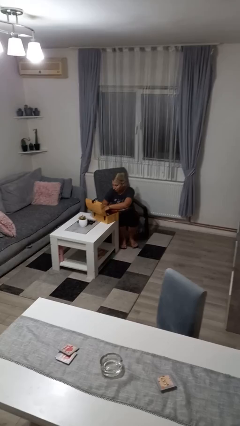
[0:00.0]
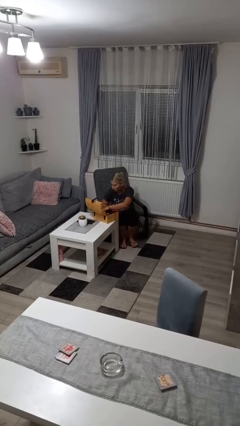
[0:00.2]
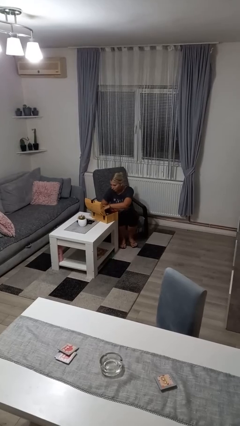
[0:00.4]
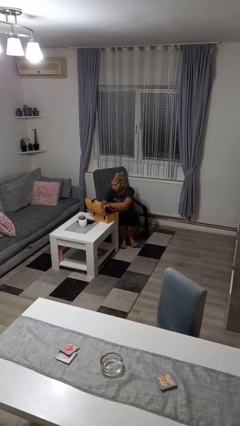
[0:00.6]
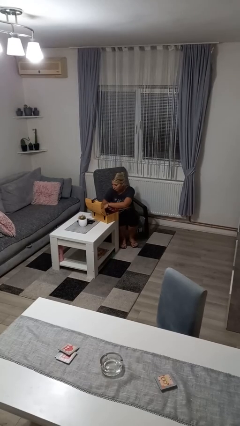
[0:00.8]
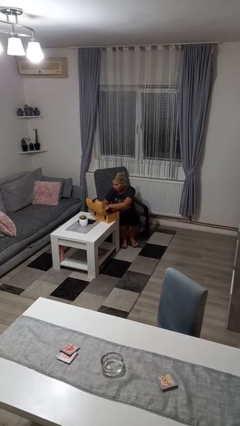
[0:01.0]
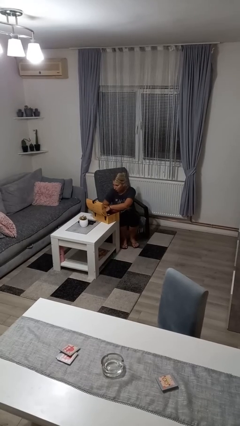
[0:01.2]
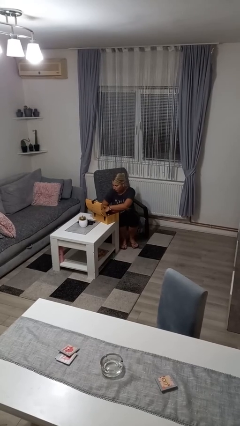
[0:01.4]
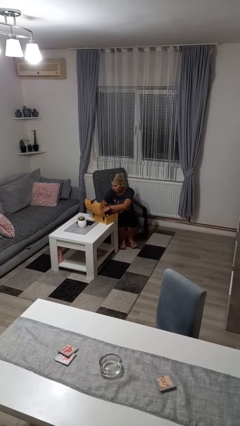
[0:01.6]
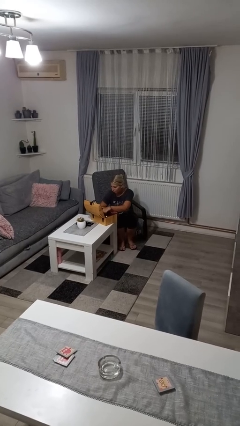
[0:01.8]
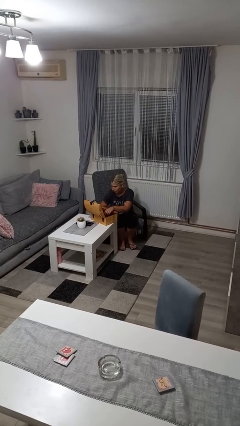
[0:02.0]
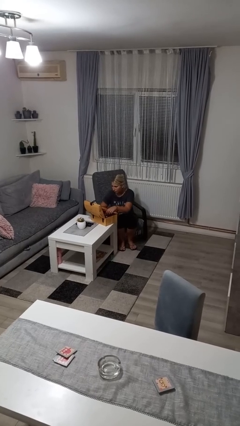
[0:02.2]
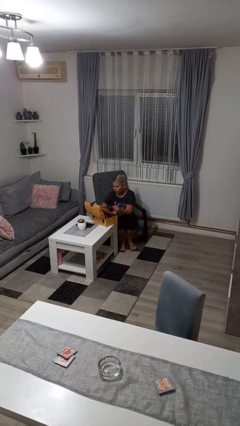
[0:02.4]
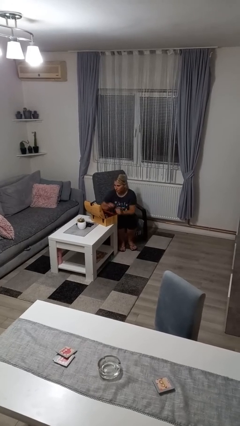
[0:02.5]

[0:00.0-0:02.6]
person searches jewelry box

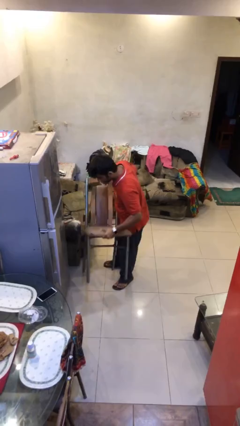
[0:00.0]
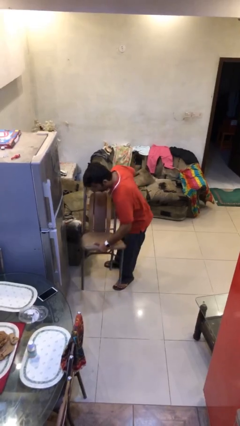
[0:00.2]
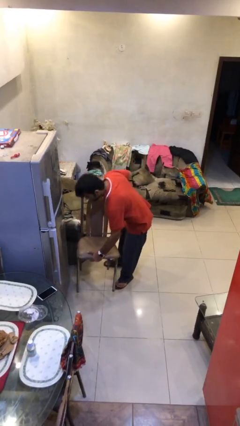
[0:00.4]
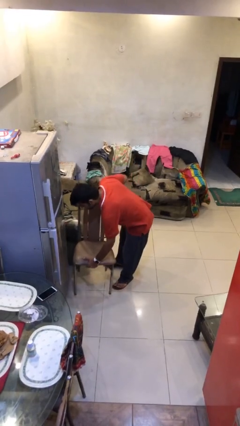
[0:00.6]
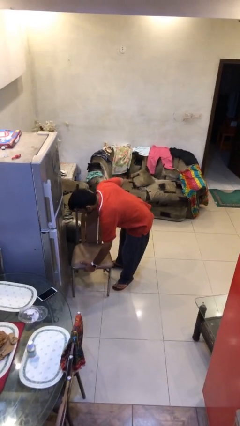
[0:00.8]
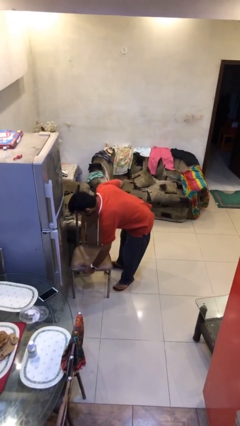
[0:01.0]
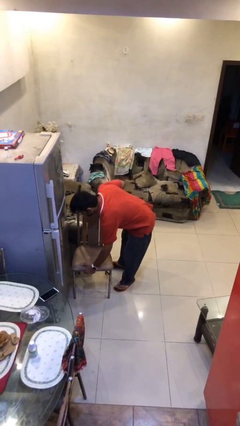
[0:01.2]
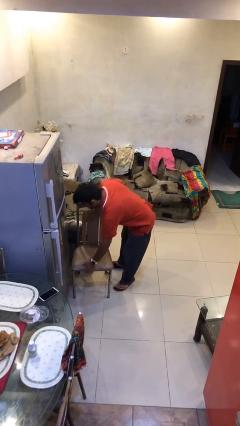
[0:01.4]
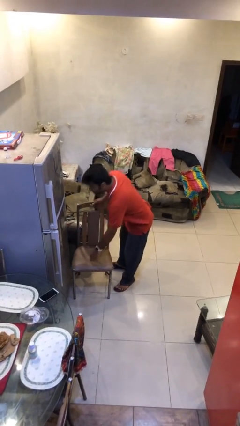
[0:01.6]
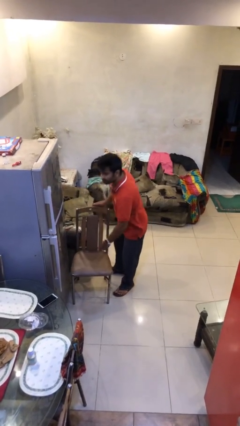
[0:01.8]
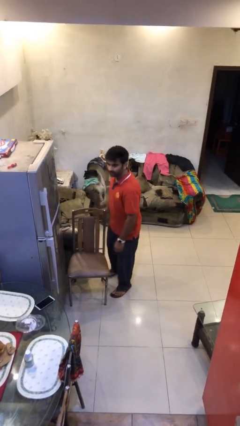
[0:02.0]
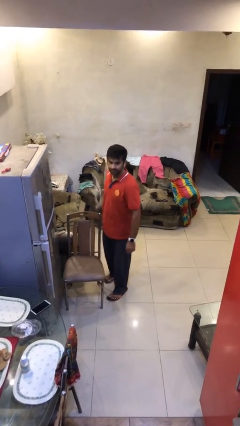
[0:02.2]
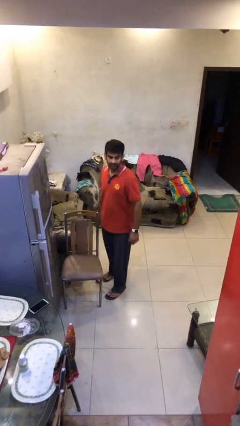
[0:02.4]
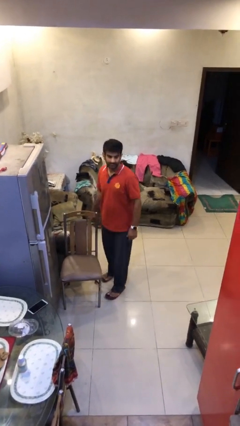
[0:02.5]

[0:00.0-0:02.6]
person puts down object on floor

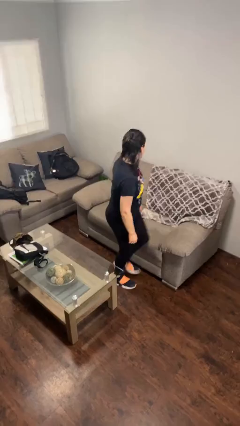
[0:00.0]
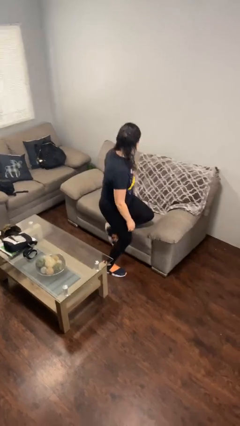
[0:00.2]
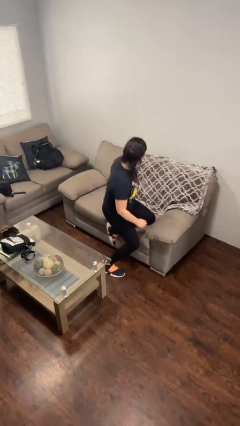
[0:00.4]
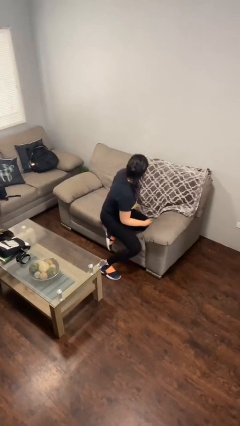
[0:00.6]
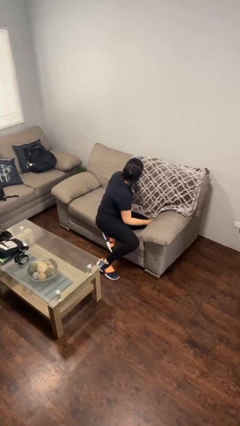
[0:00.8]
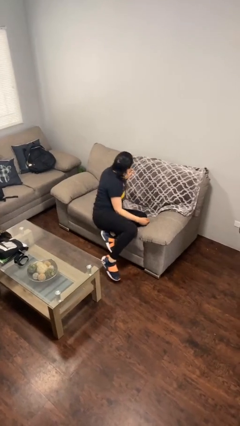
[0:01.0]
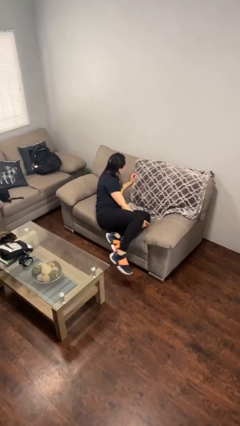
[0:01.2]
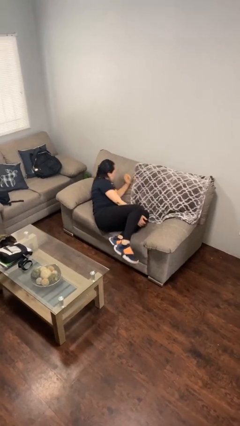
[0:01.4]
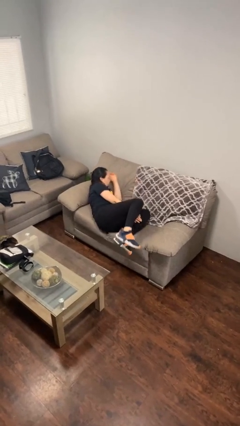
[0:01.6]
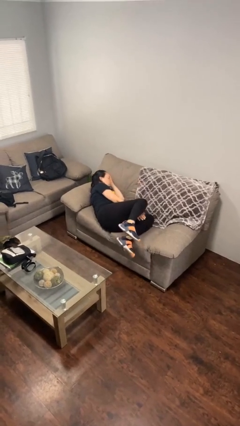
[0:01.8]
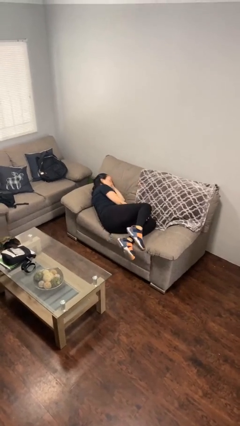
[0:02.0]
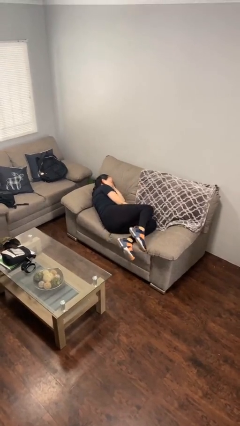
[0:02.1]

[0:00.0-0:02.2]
person lies down on couch

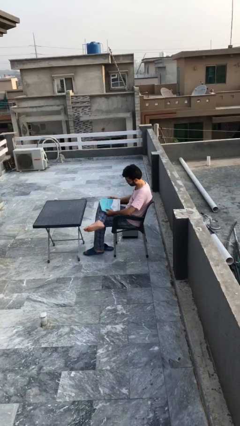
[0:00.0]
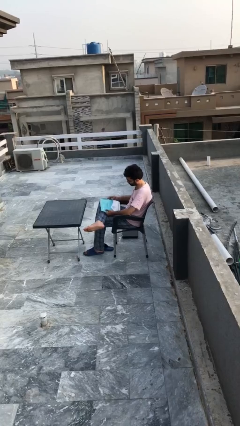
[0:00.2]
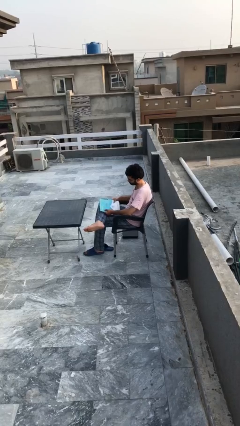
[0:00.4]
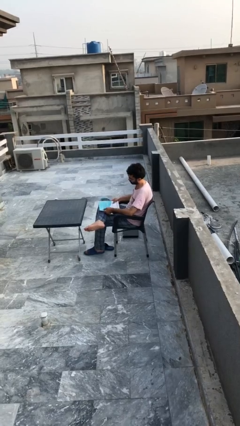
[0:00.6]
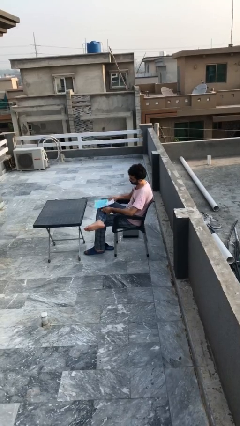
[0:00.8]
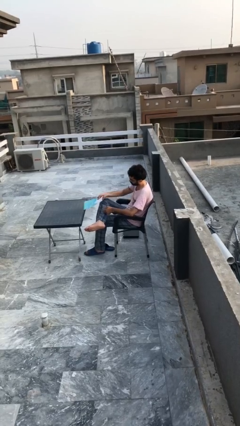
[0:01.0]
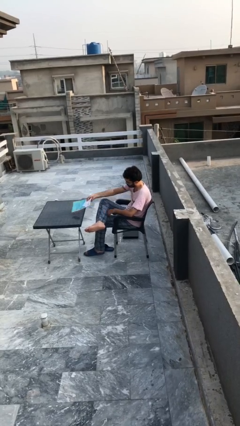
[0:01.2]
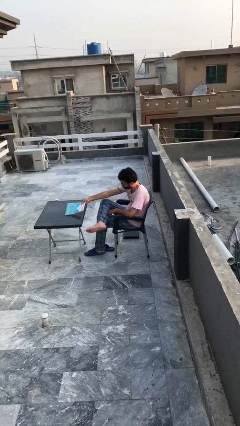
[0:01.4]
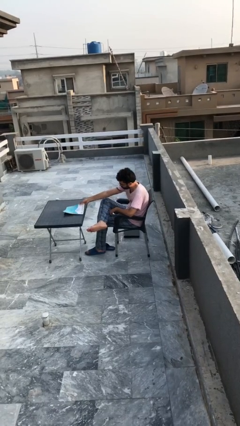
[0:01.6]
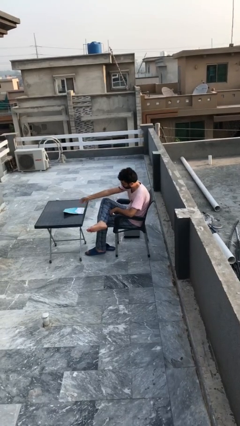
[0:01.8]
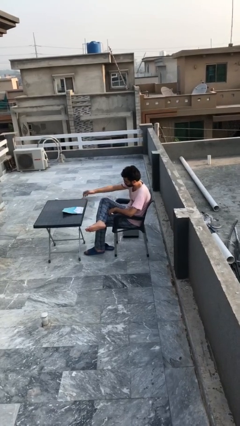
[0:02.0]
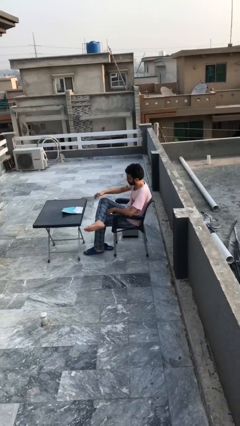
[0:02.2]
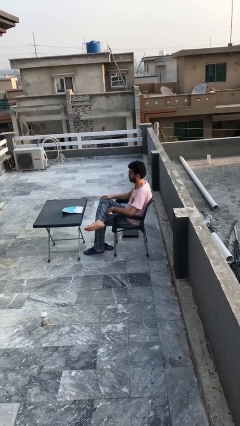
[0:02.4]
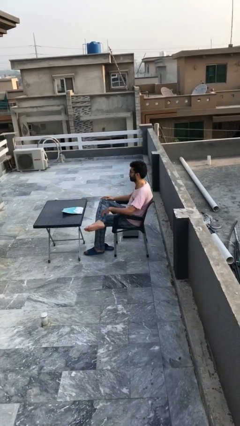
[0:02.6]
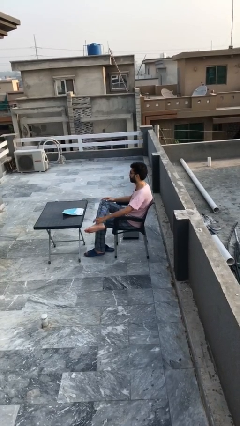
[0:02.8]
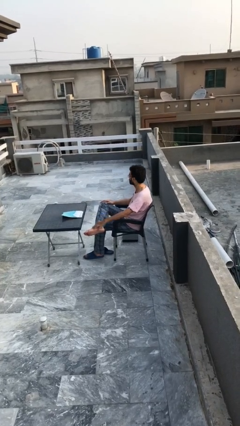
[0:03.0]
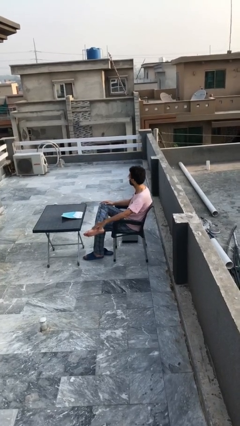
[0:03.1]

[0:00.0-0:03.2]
person puts down object on table

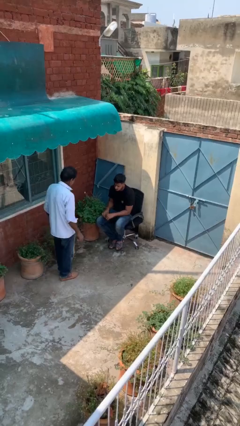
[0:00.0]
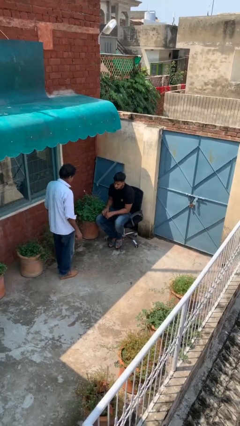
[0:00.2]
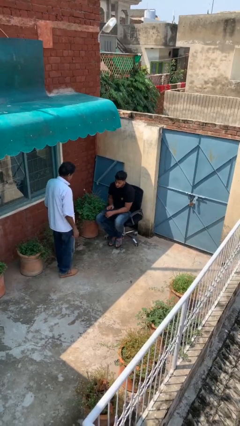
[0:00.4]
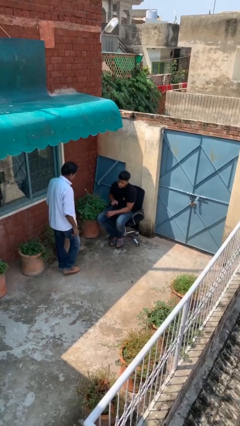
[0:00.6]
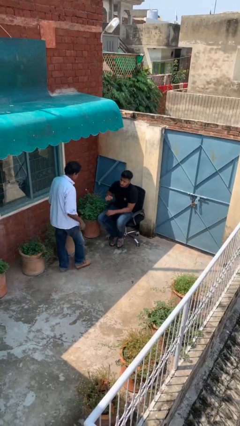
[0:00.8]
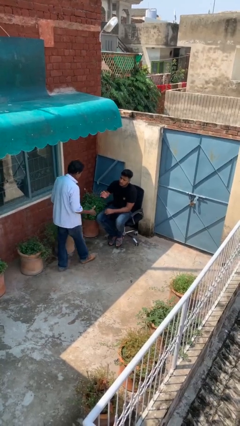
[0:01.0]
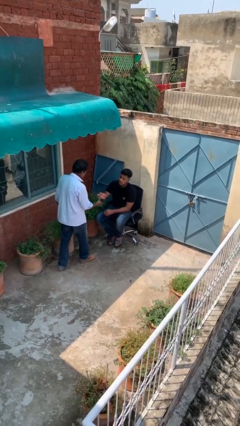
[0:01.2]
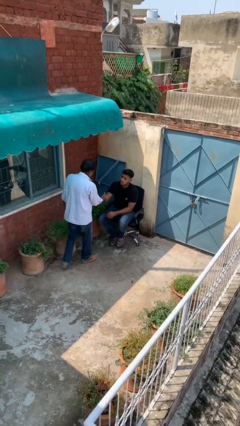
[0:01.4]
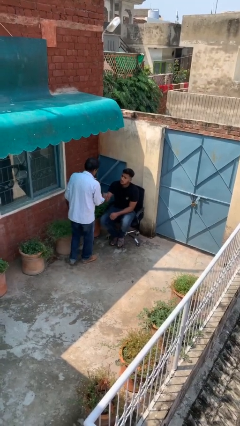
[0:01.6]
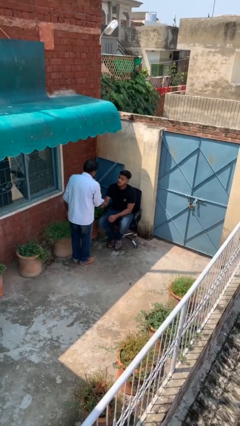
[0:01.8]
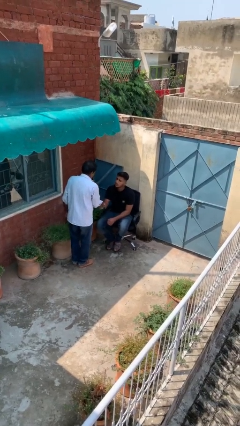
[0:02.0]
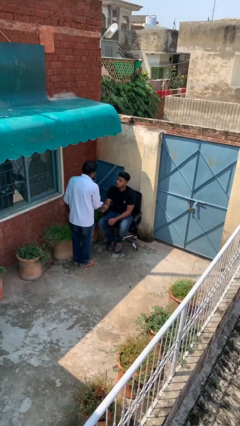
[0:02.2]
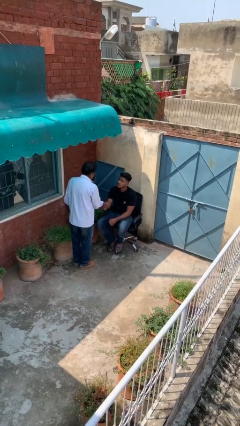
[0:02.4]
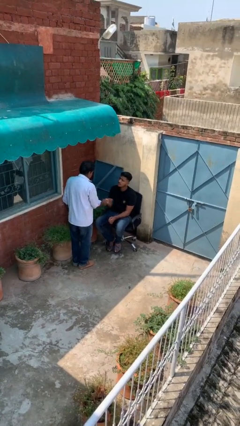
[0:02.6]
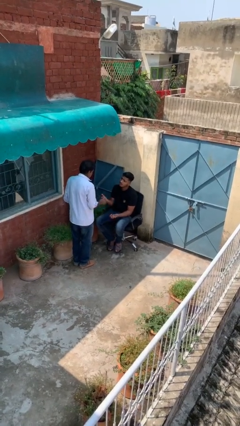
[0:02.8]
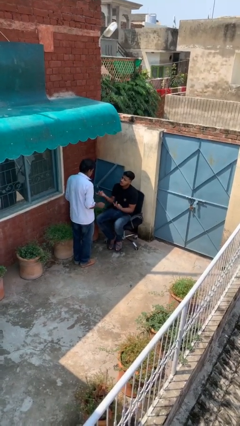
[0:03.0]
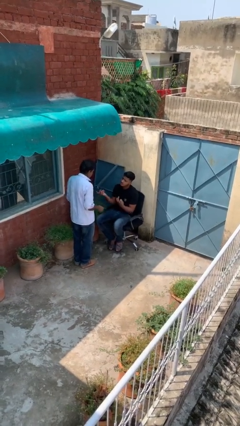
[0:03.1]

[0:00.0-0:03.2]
person shakes hand

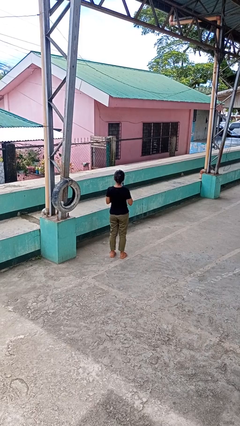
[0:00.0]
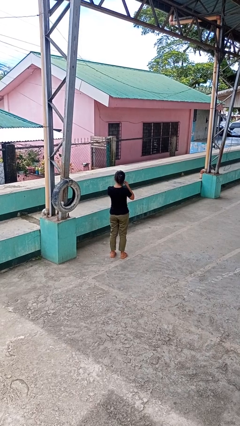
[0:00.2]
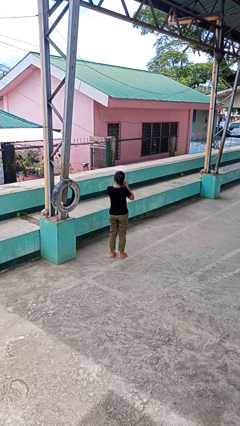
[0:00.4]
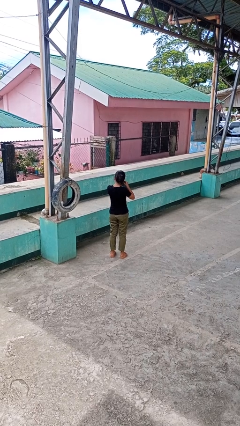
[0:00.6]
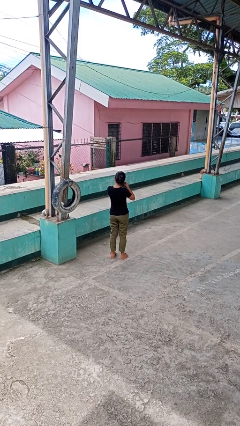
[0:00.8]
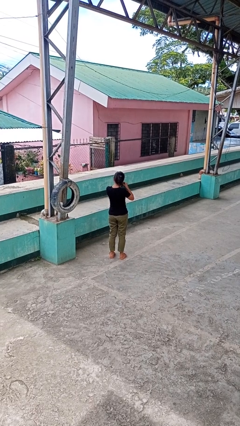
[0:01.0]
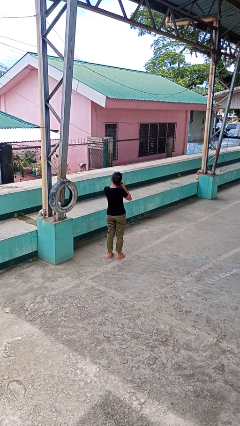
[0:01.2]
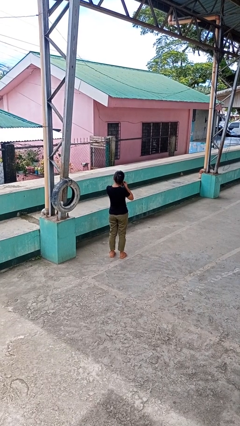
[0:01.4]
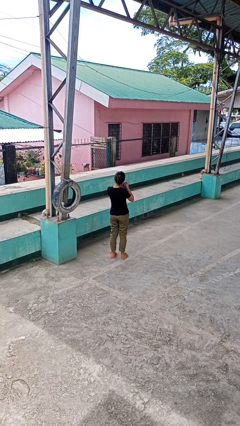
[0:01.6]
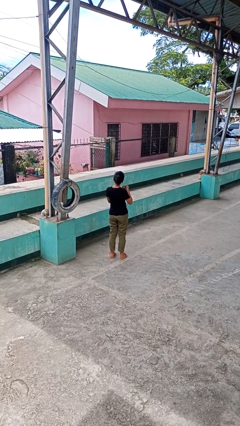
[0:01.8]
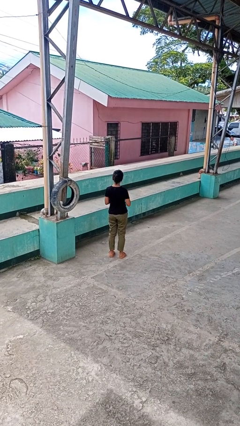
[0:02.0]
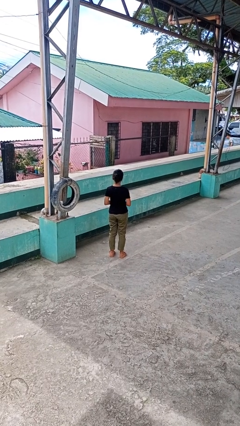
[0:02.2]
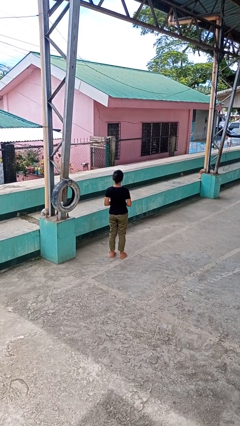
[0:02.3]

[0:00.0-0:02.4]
person takes off earrings

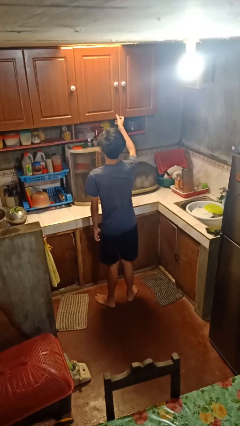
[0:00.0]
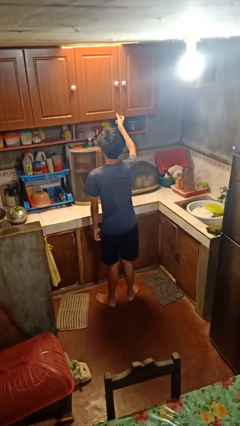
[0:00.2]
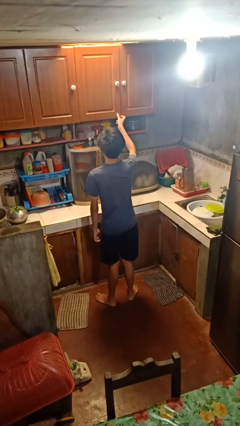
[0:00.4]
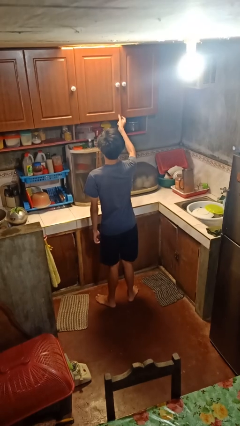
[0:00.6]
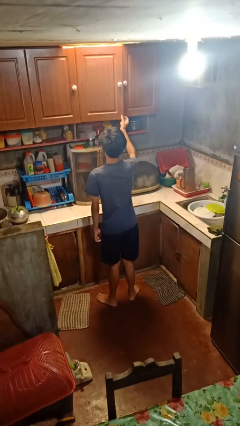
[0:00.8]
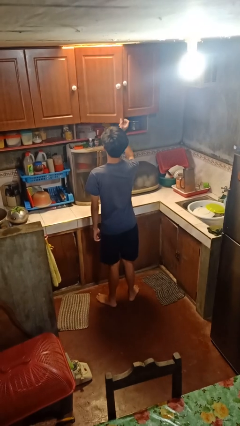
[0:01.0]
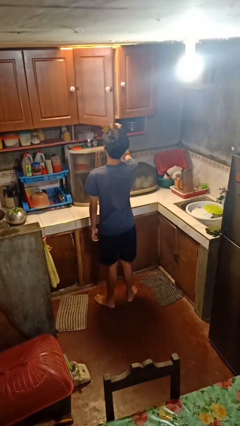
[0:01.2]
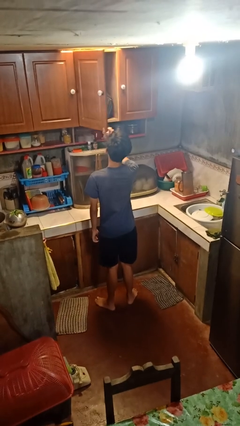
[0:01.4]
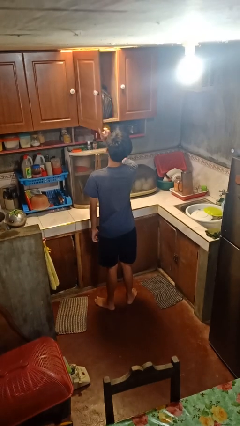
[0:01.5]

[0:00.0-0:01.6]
person opens cabinet
